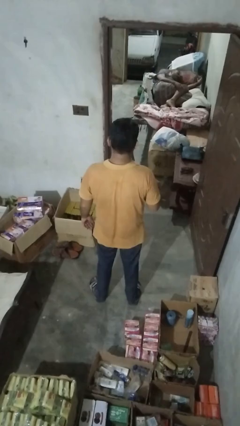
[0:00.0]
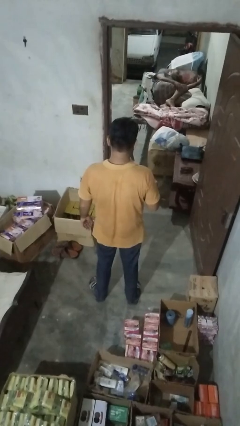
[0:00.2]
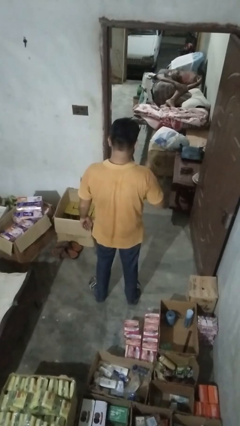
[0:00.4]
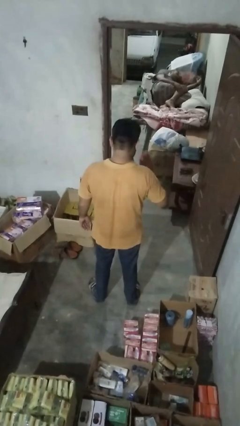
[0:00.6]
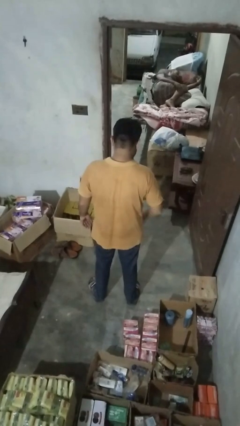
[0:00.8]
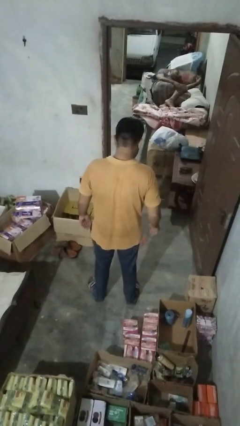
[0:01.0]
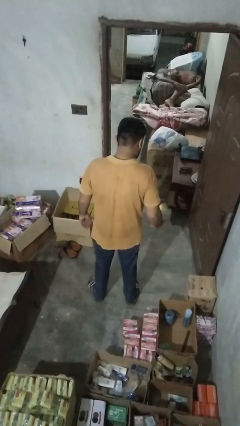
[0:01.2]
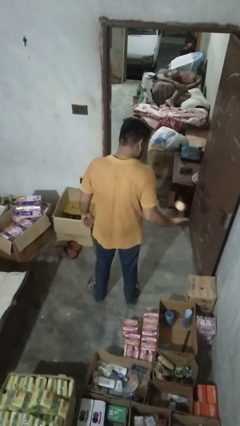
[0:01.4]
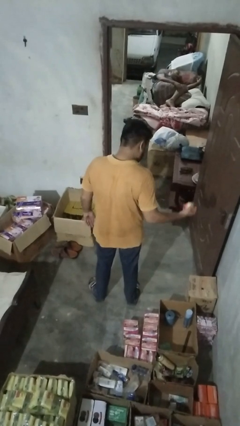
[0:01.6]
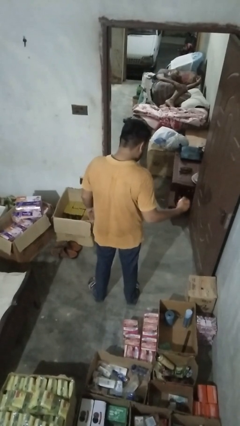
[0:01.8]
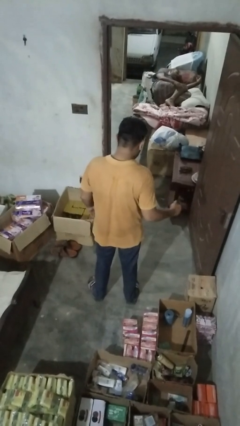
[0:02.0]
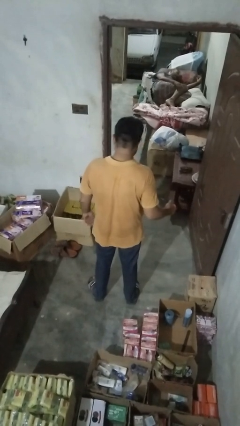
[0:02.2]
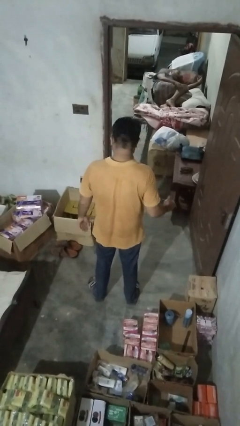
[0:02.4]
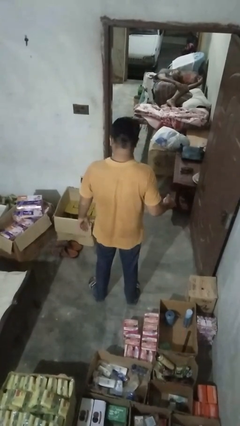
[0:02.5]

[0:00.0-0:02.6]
person bounces ball on floor

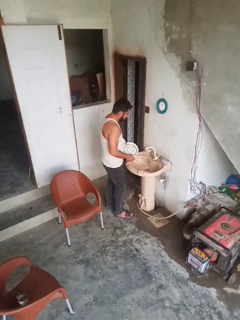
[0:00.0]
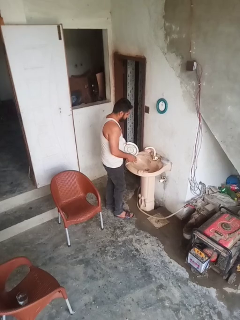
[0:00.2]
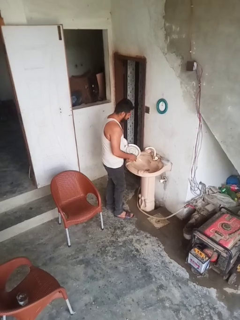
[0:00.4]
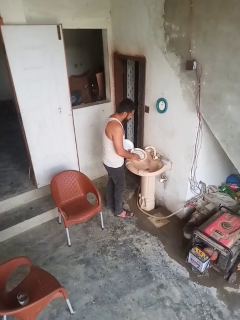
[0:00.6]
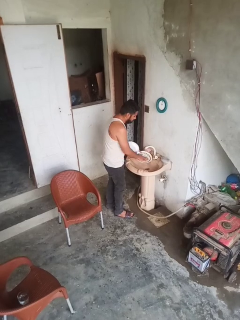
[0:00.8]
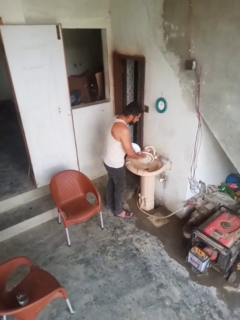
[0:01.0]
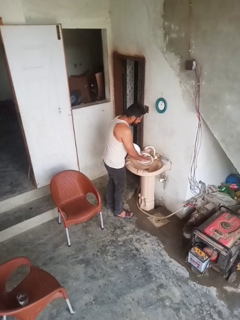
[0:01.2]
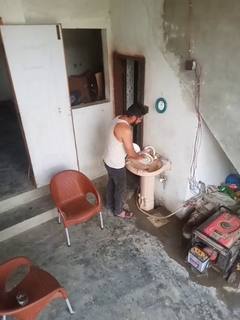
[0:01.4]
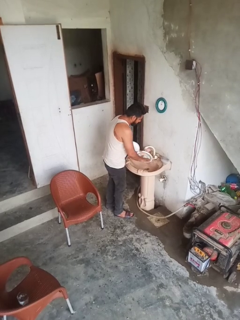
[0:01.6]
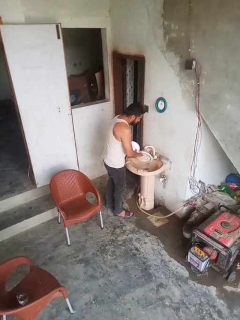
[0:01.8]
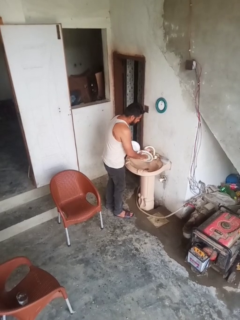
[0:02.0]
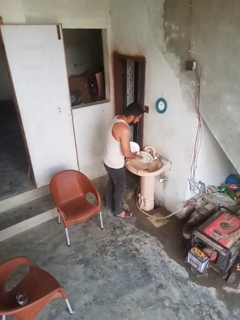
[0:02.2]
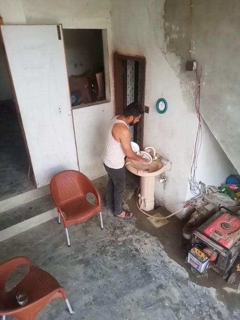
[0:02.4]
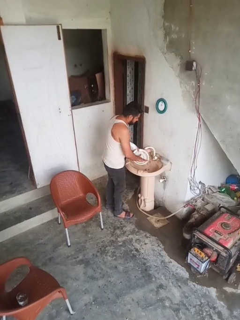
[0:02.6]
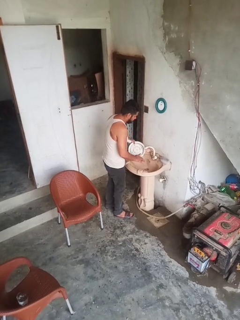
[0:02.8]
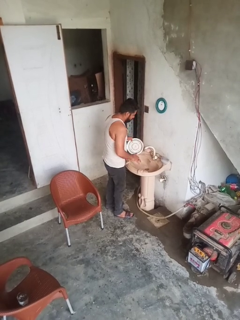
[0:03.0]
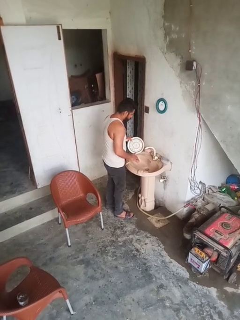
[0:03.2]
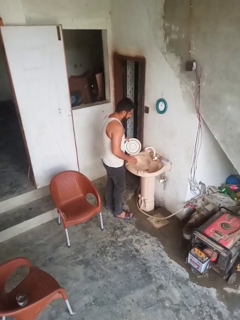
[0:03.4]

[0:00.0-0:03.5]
person washes dish

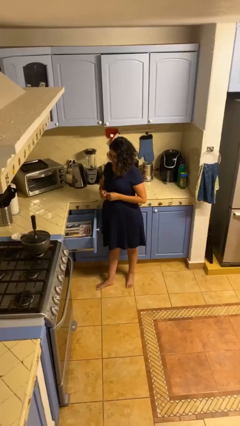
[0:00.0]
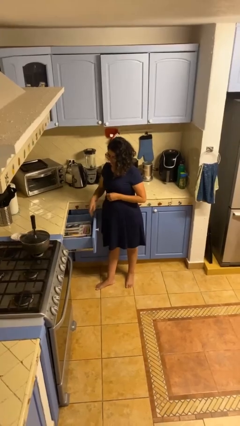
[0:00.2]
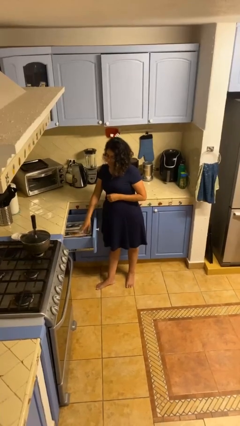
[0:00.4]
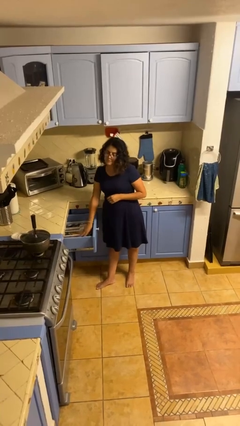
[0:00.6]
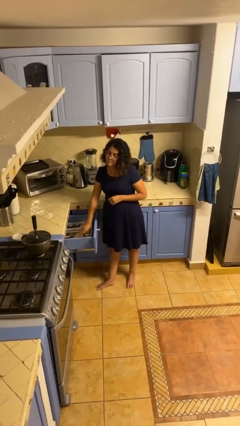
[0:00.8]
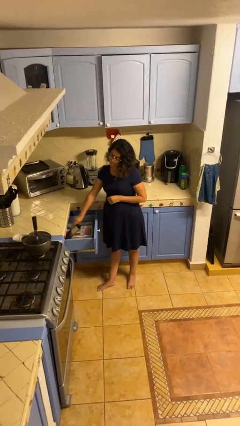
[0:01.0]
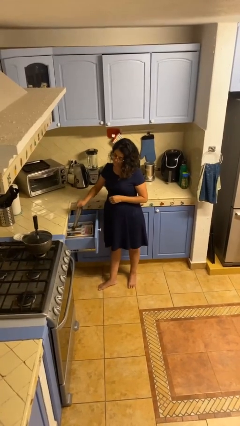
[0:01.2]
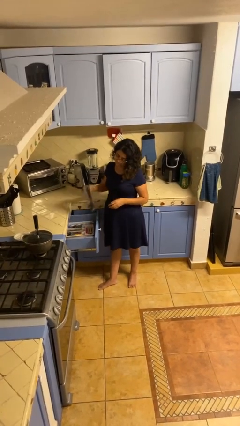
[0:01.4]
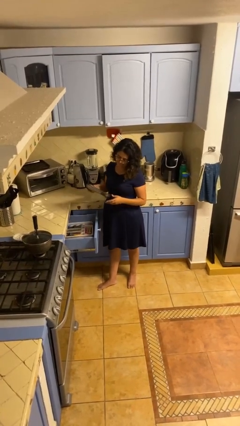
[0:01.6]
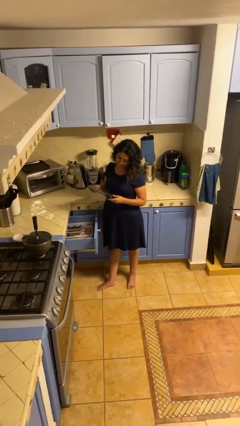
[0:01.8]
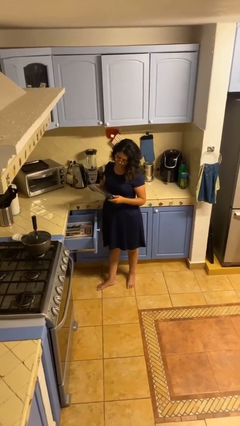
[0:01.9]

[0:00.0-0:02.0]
person takes object from kitchen drawer

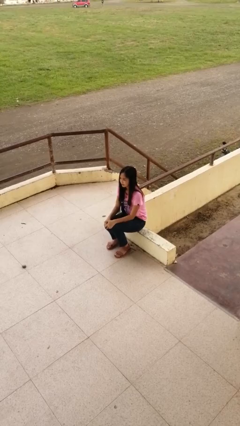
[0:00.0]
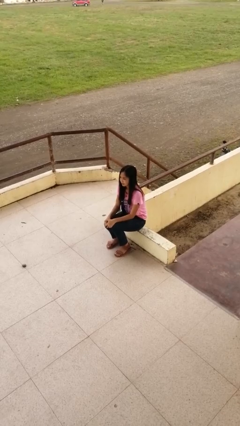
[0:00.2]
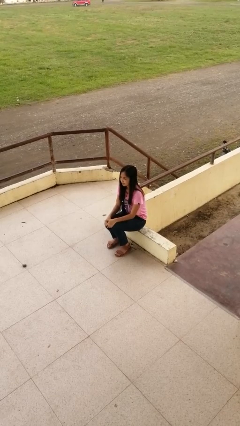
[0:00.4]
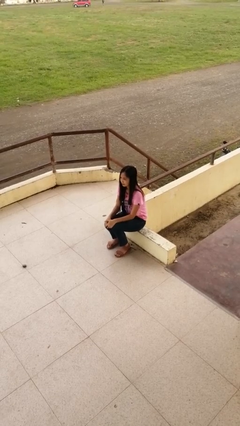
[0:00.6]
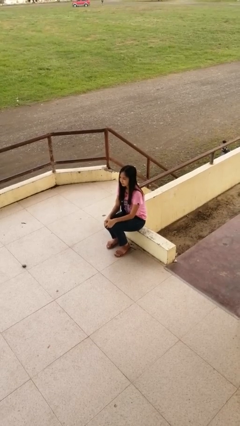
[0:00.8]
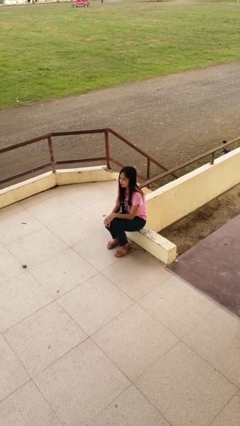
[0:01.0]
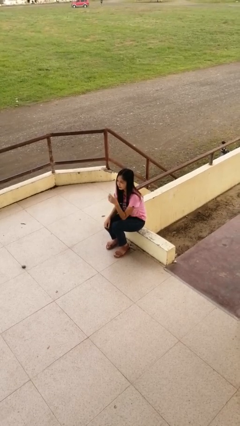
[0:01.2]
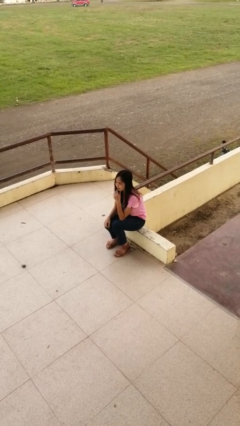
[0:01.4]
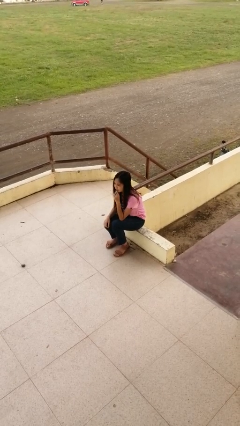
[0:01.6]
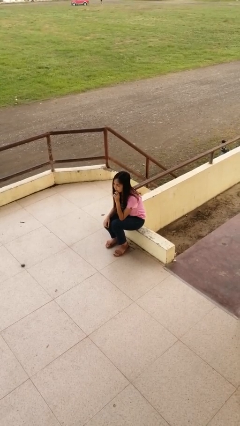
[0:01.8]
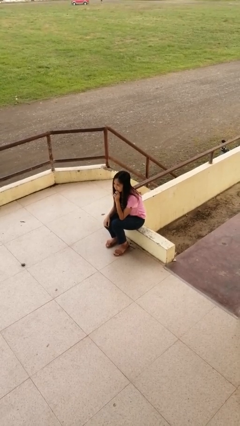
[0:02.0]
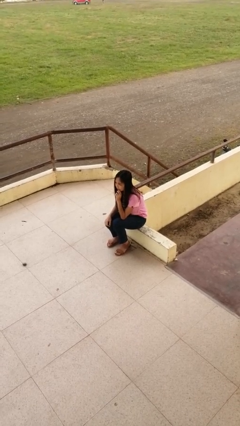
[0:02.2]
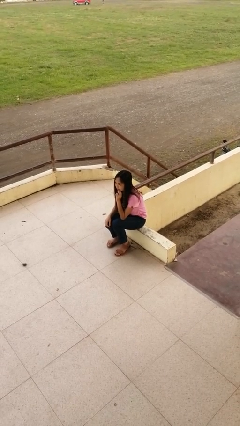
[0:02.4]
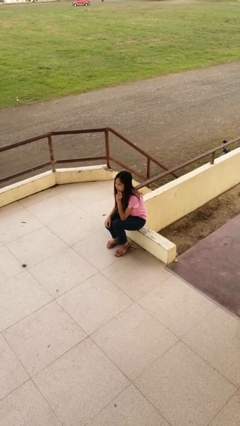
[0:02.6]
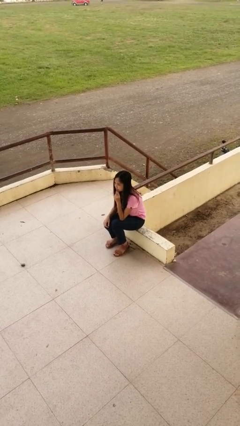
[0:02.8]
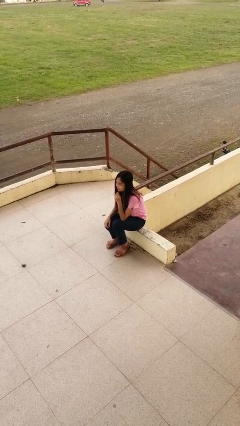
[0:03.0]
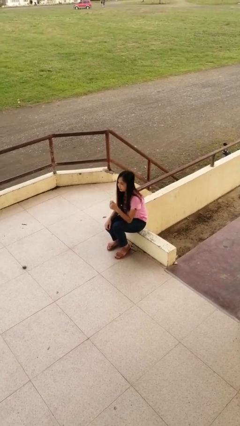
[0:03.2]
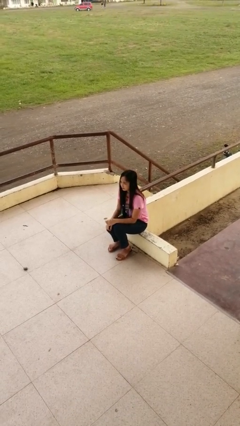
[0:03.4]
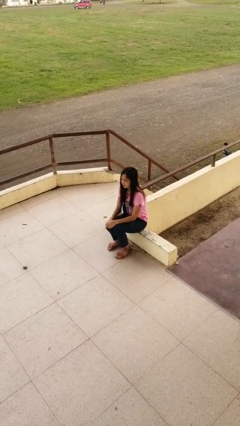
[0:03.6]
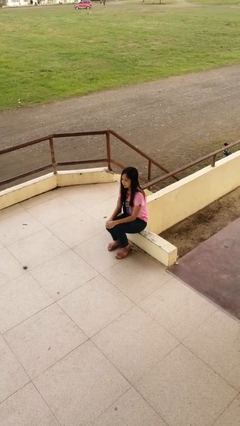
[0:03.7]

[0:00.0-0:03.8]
person strokes chin

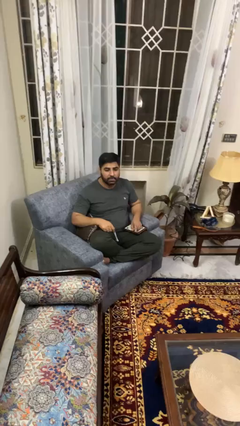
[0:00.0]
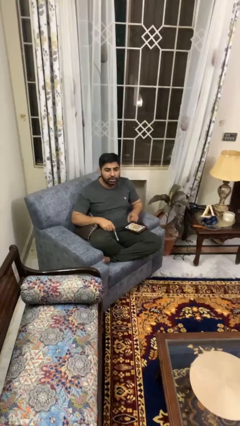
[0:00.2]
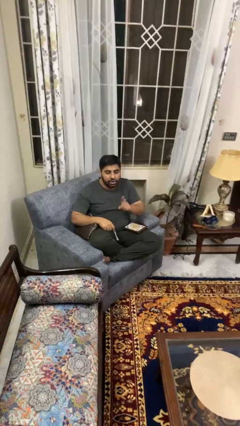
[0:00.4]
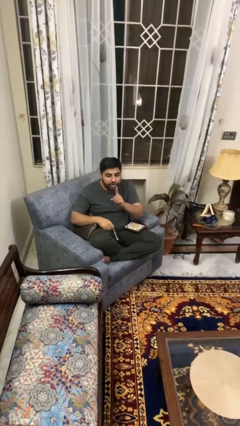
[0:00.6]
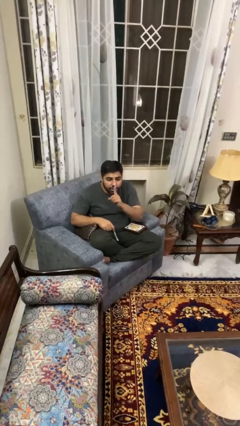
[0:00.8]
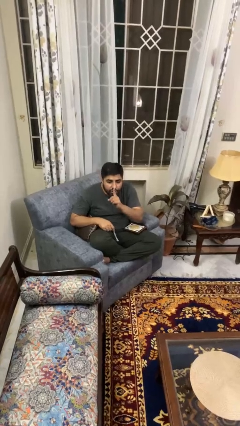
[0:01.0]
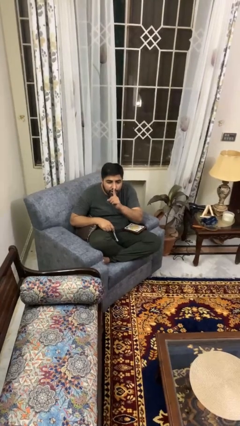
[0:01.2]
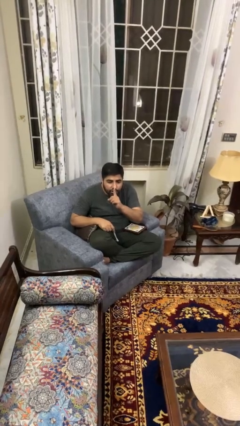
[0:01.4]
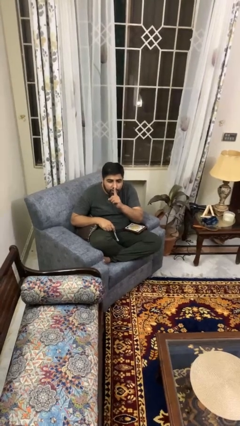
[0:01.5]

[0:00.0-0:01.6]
person gestures be quiet

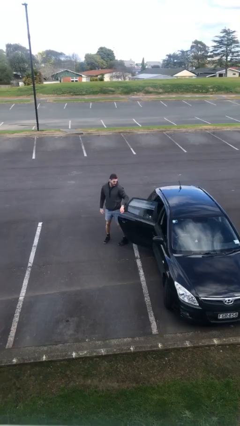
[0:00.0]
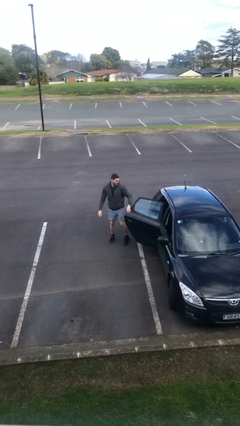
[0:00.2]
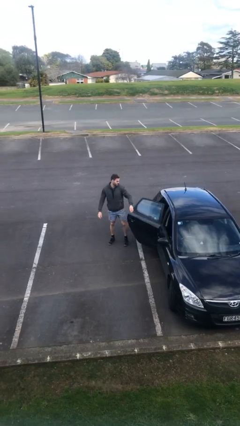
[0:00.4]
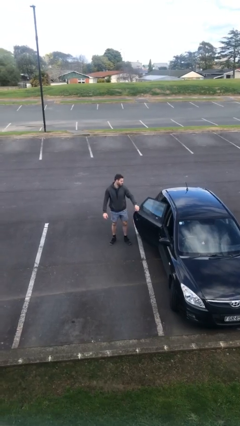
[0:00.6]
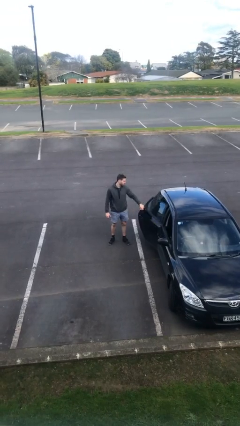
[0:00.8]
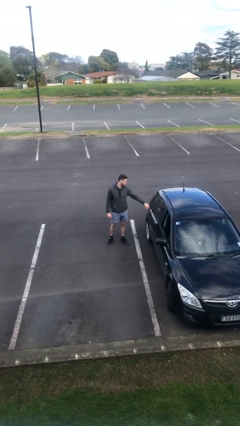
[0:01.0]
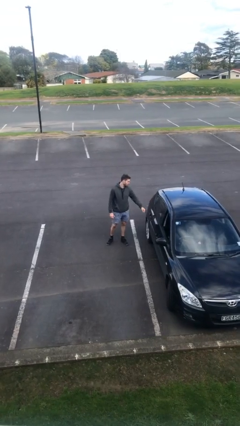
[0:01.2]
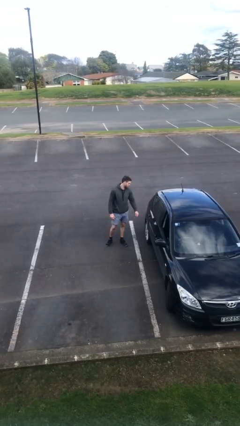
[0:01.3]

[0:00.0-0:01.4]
person closes car door

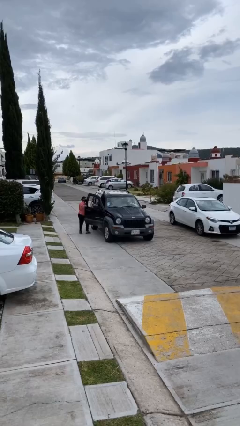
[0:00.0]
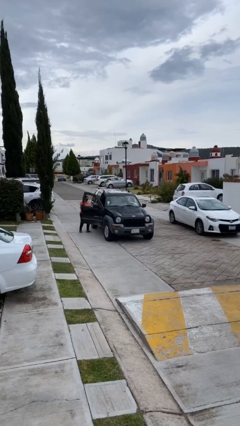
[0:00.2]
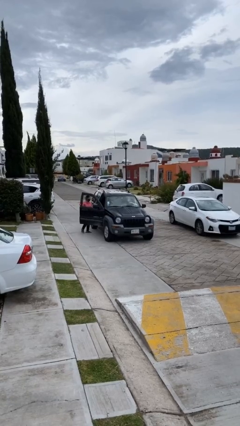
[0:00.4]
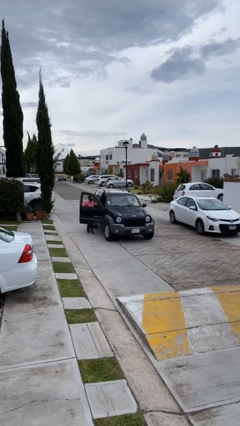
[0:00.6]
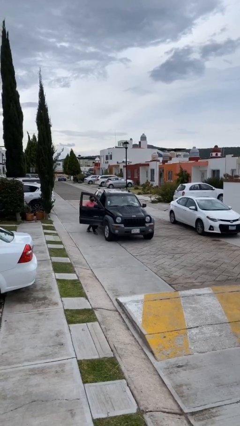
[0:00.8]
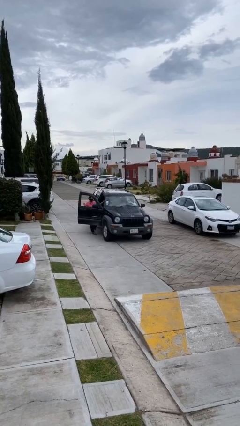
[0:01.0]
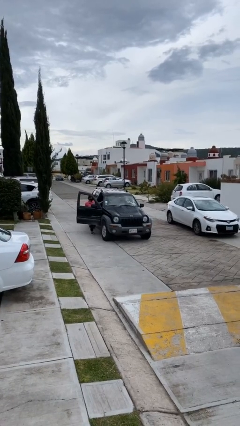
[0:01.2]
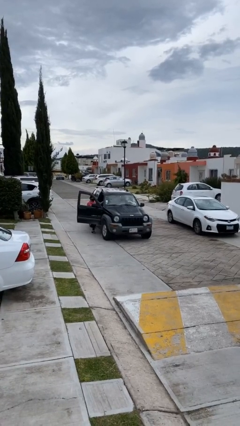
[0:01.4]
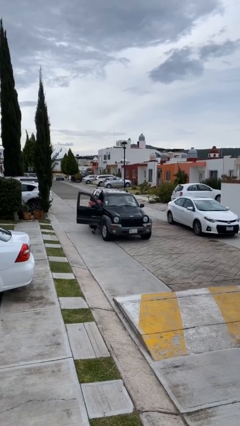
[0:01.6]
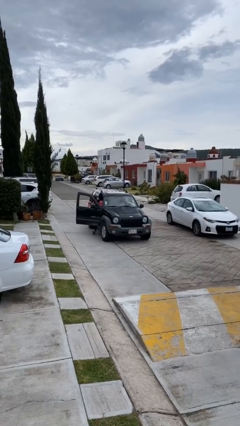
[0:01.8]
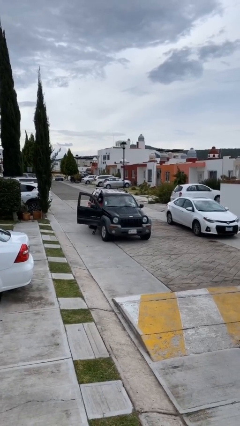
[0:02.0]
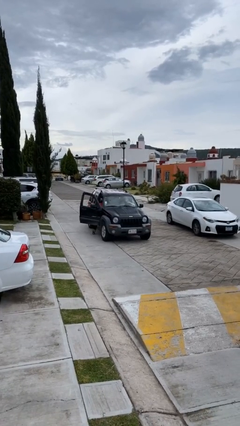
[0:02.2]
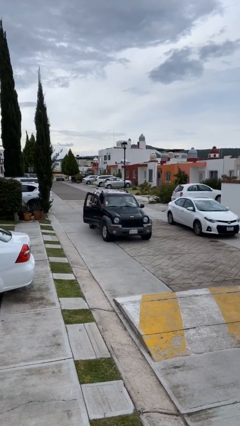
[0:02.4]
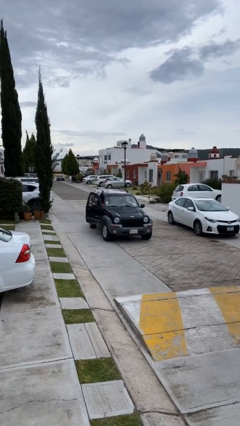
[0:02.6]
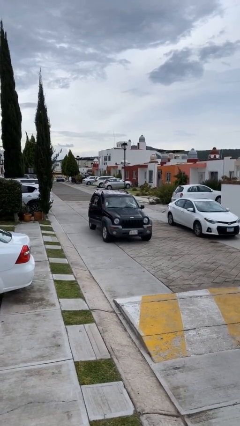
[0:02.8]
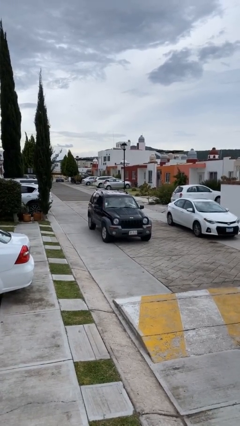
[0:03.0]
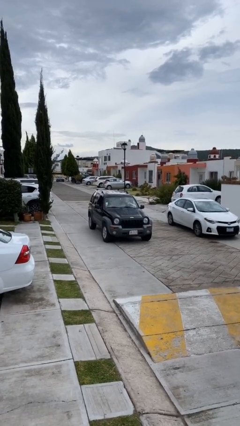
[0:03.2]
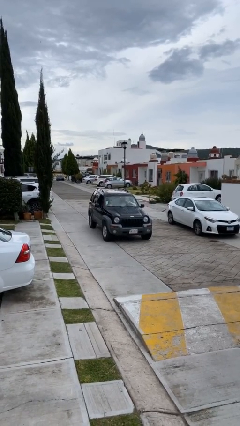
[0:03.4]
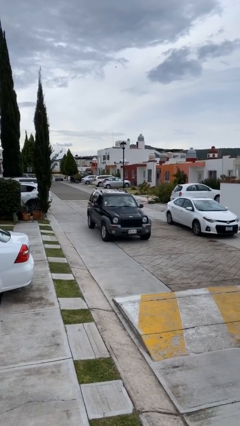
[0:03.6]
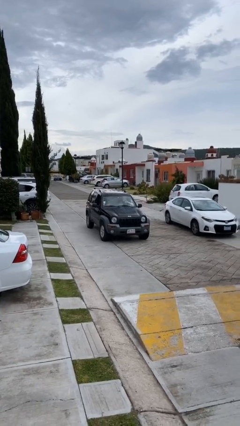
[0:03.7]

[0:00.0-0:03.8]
car picks up person
